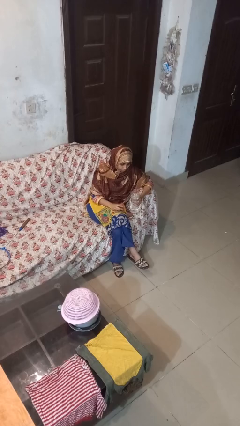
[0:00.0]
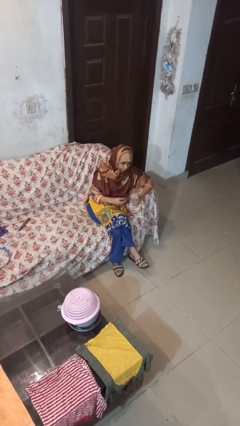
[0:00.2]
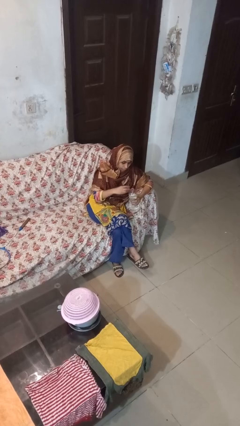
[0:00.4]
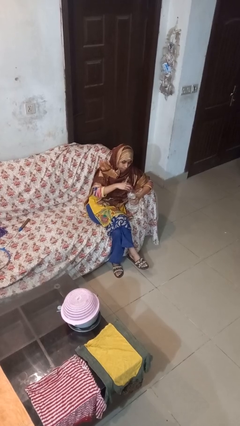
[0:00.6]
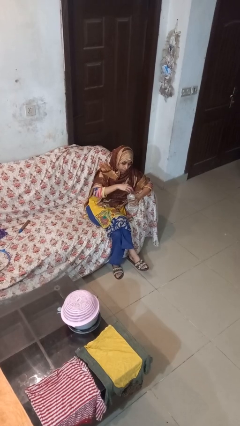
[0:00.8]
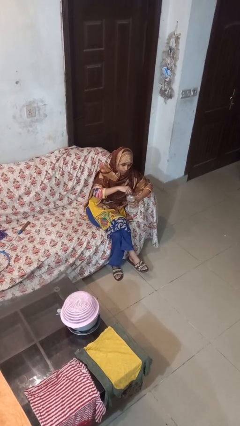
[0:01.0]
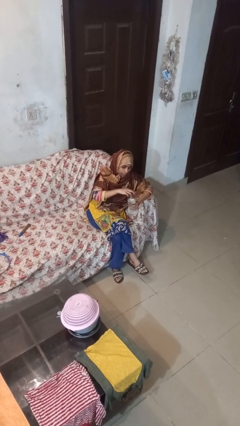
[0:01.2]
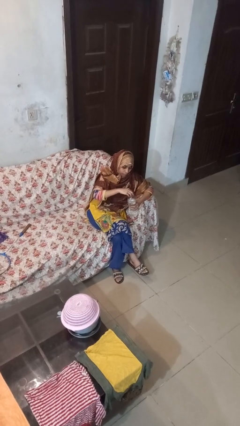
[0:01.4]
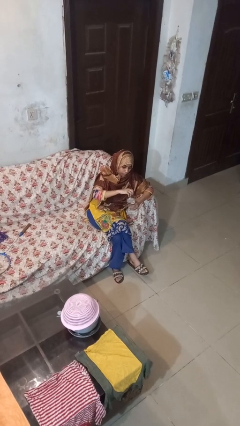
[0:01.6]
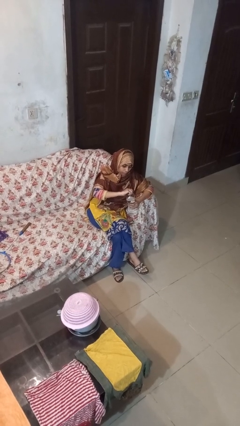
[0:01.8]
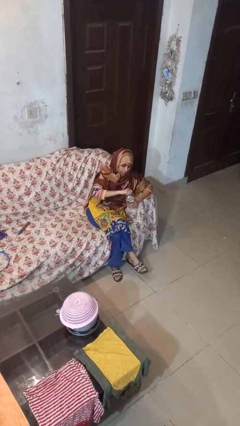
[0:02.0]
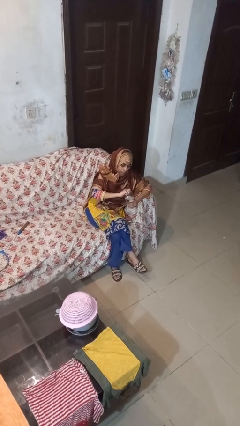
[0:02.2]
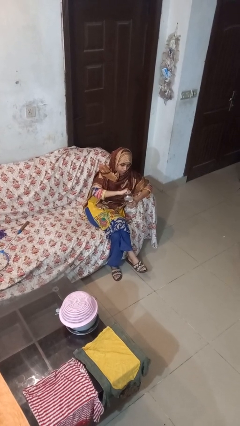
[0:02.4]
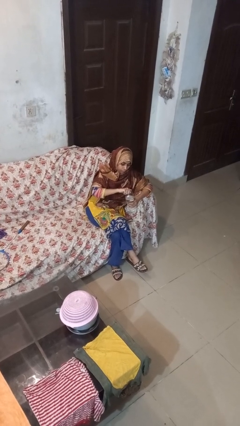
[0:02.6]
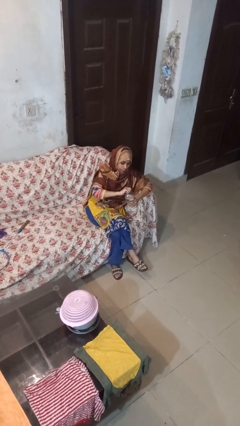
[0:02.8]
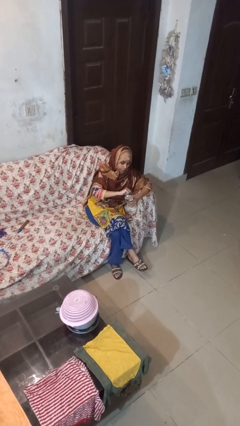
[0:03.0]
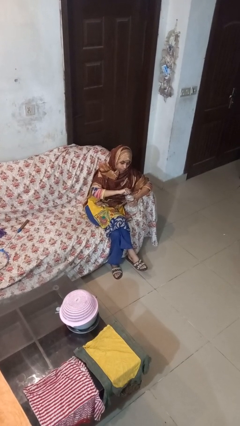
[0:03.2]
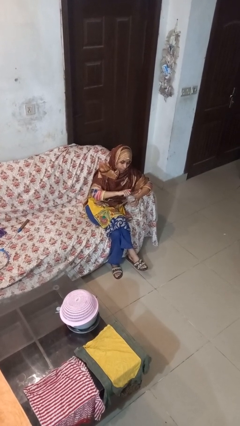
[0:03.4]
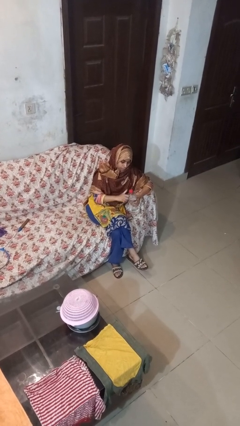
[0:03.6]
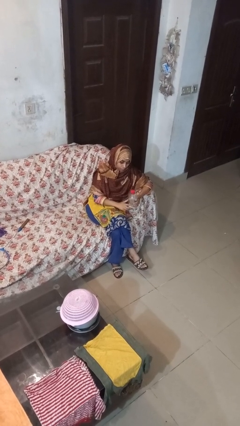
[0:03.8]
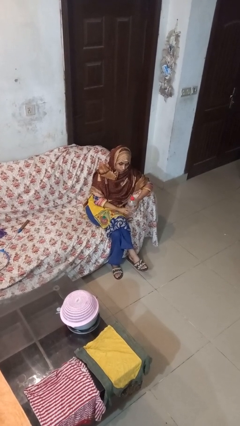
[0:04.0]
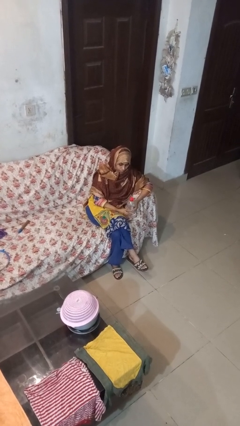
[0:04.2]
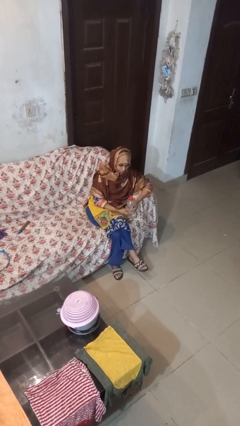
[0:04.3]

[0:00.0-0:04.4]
person screws lid to bottle

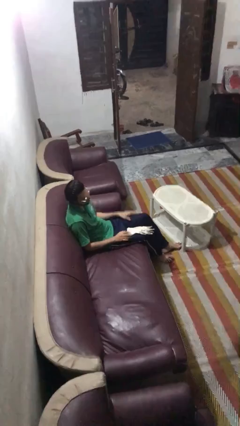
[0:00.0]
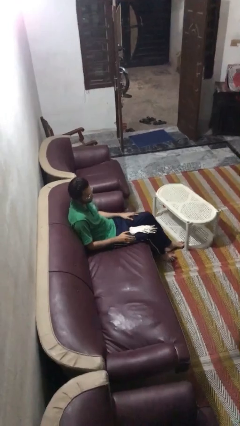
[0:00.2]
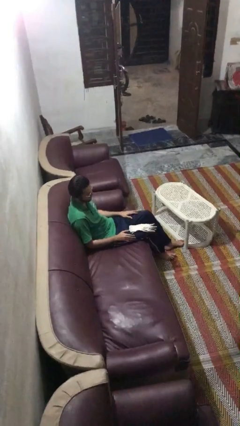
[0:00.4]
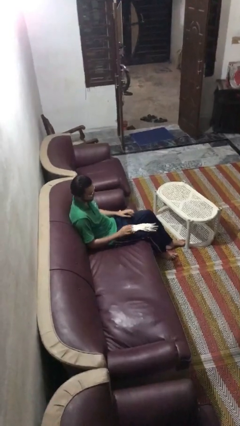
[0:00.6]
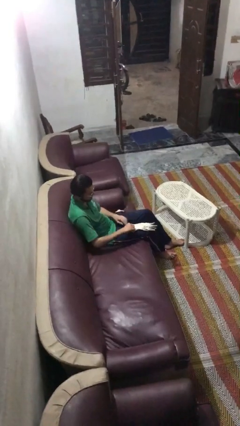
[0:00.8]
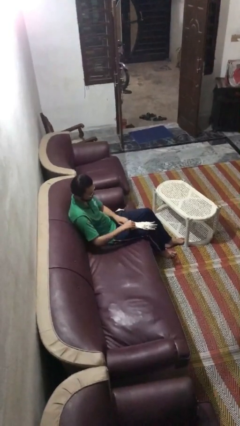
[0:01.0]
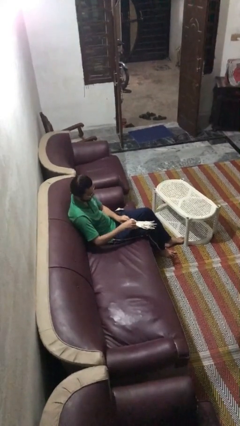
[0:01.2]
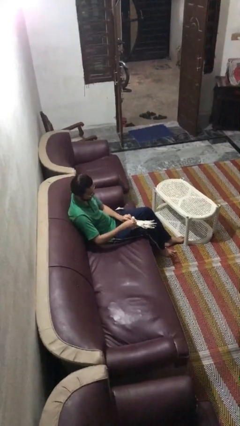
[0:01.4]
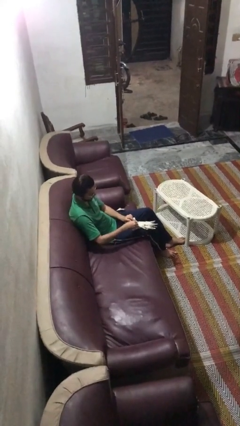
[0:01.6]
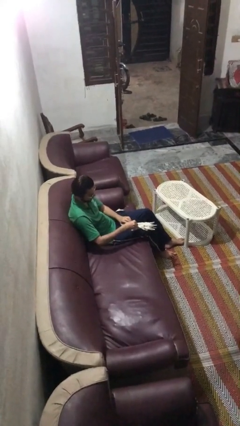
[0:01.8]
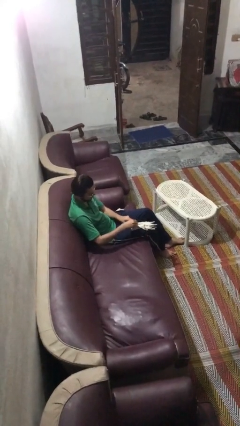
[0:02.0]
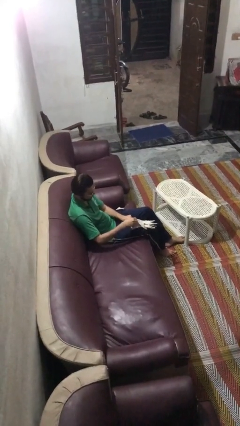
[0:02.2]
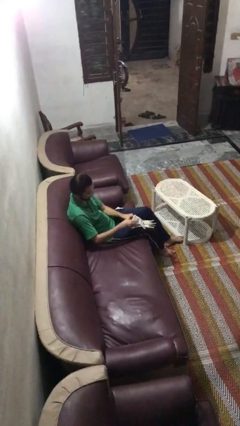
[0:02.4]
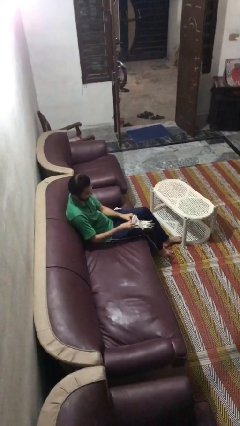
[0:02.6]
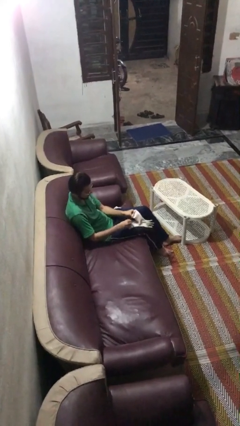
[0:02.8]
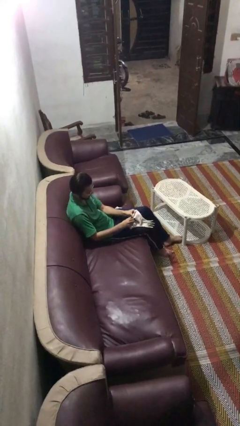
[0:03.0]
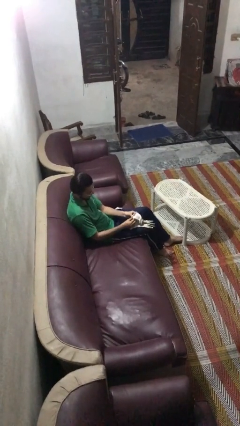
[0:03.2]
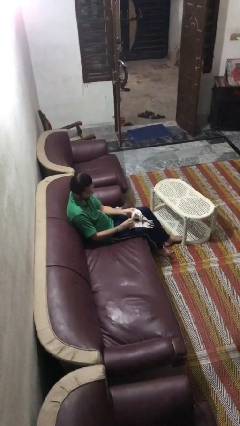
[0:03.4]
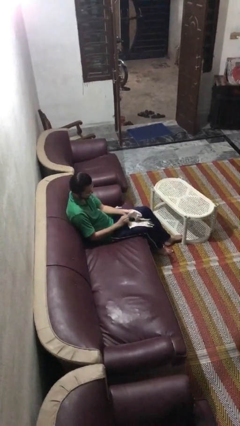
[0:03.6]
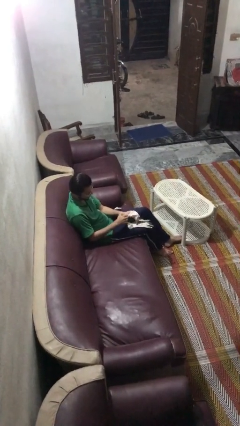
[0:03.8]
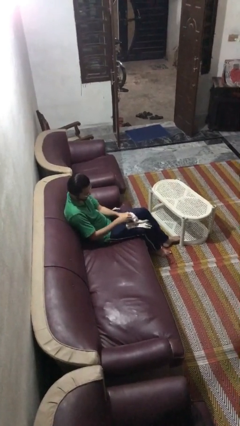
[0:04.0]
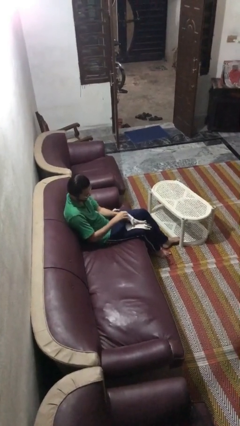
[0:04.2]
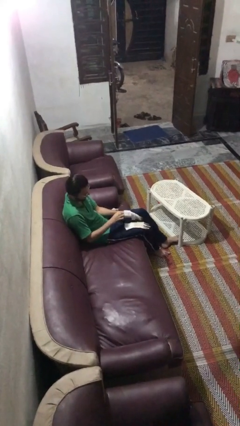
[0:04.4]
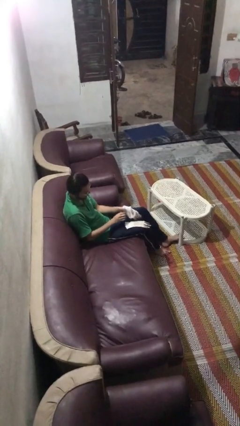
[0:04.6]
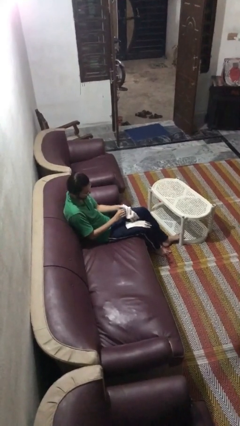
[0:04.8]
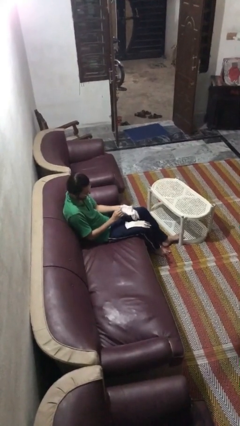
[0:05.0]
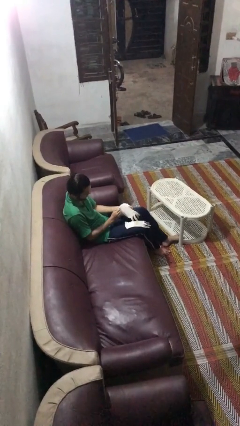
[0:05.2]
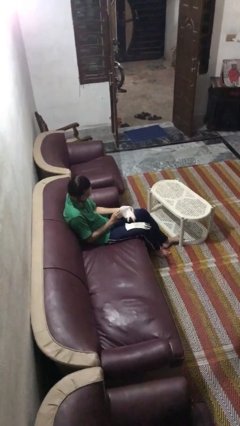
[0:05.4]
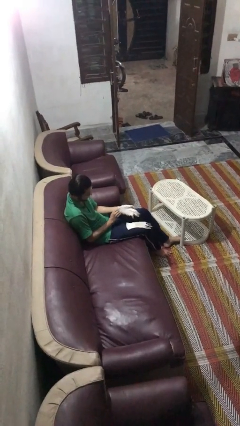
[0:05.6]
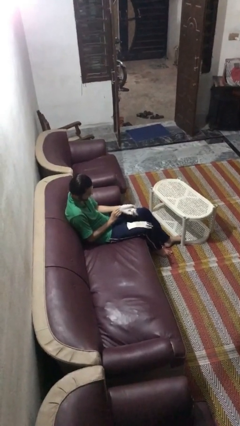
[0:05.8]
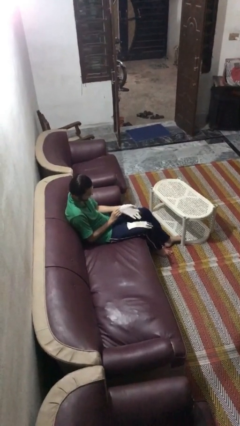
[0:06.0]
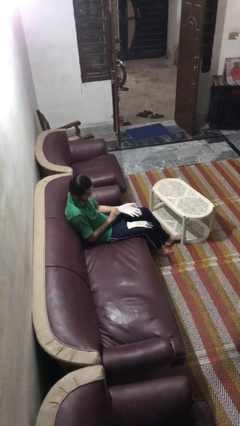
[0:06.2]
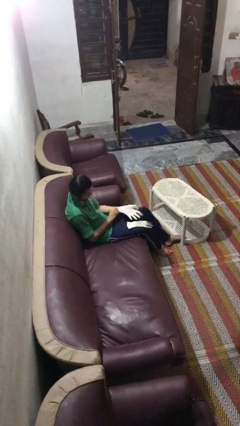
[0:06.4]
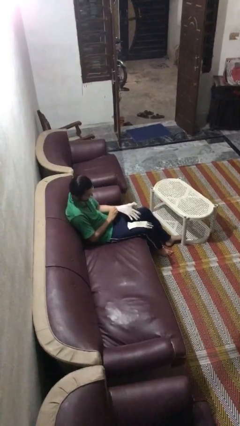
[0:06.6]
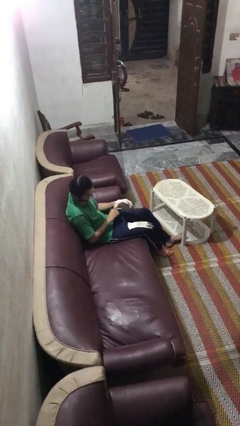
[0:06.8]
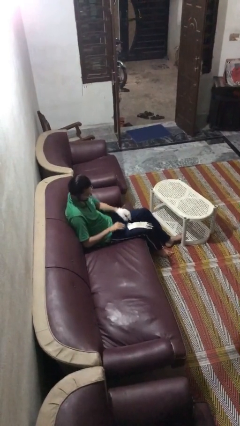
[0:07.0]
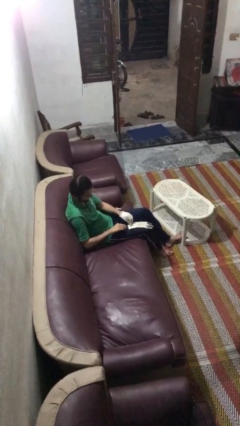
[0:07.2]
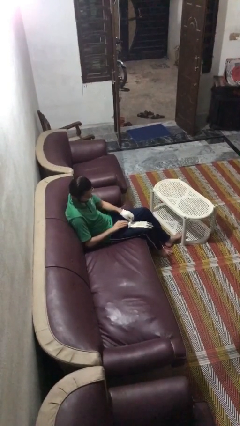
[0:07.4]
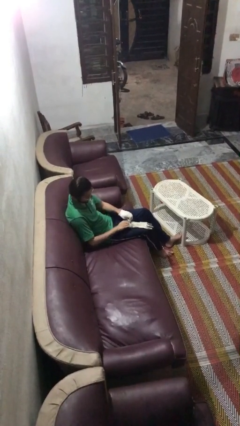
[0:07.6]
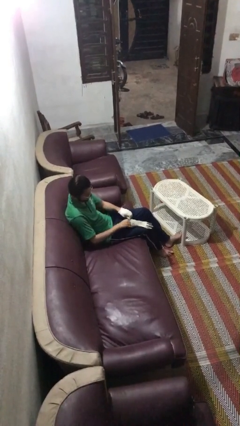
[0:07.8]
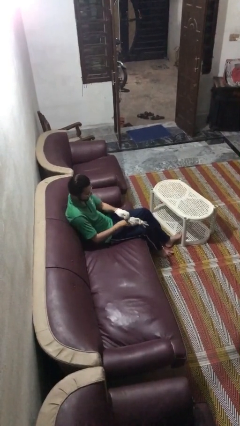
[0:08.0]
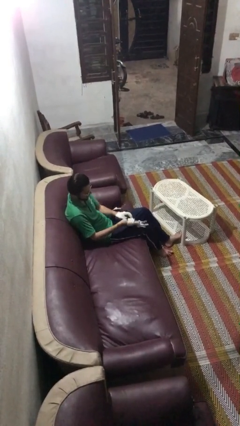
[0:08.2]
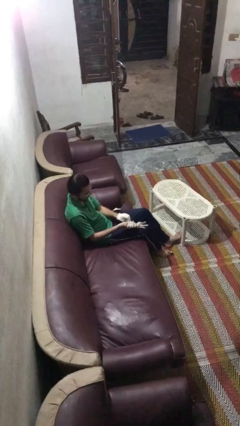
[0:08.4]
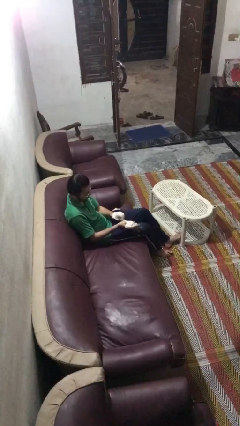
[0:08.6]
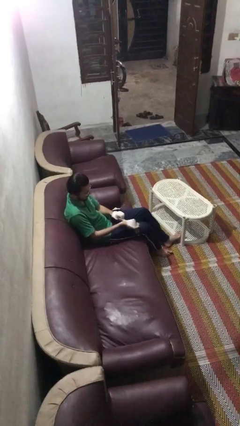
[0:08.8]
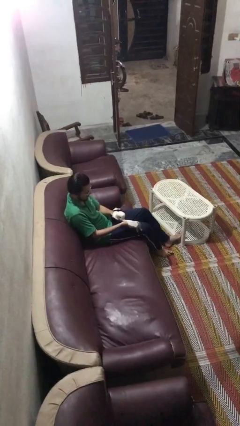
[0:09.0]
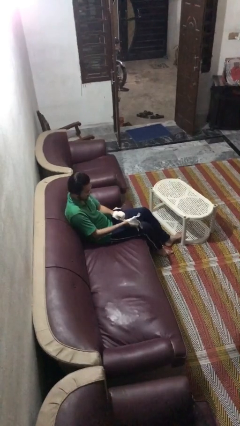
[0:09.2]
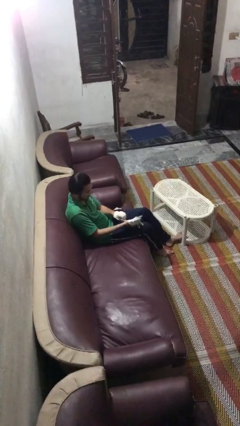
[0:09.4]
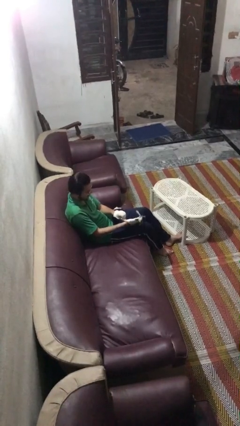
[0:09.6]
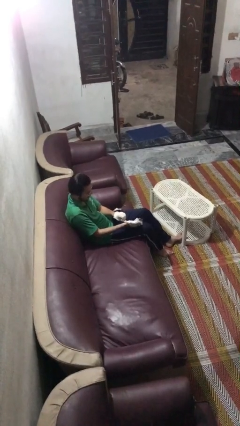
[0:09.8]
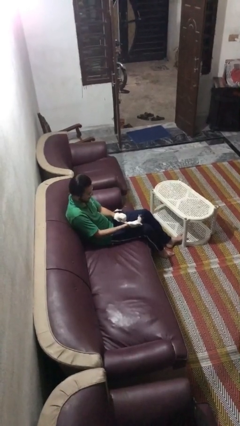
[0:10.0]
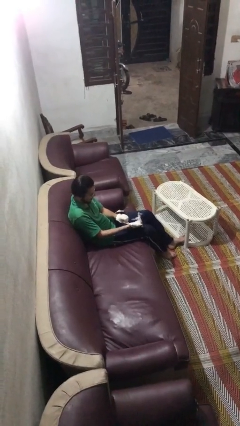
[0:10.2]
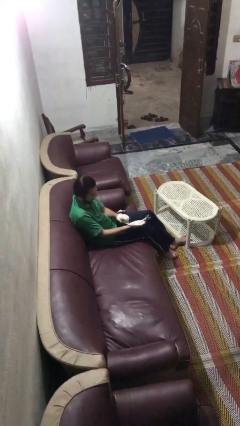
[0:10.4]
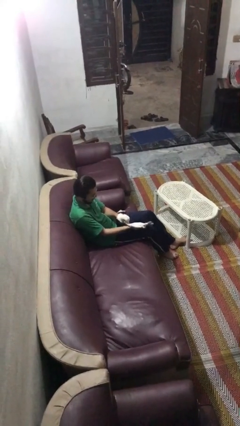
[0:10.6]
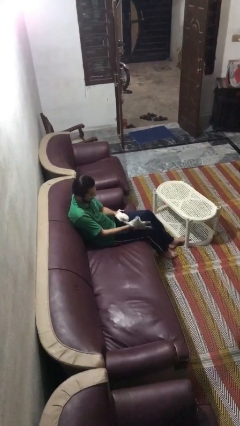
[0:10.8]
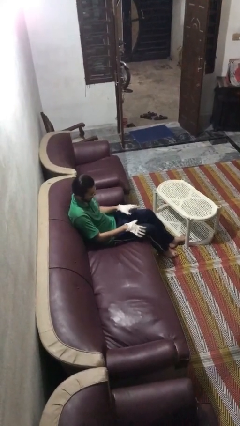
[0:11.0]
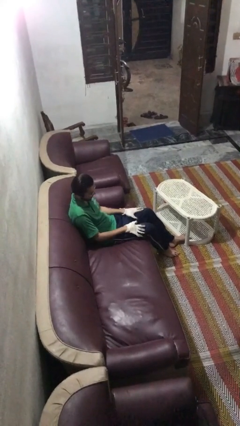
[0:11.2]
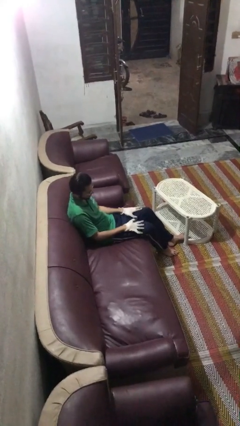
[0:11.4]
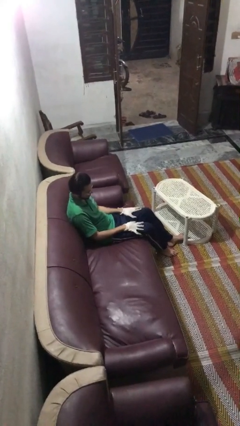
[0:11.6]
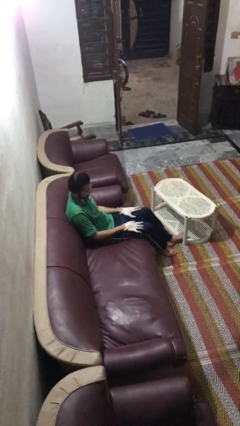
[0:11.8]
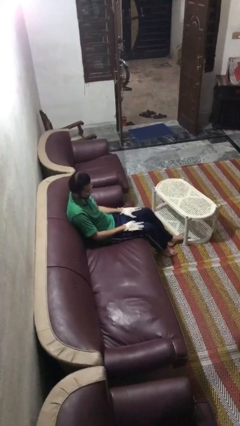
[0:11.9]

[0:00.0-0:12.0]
person puts on gloves

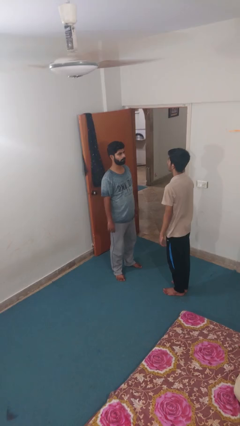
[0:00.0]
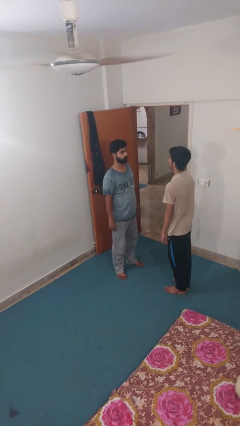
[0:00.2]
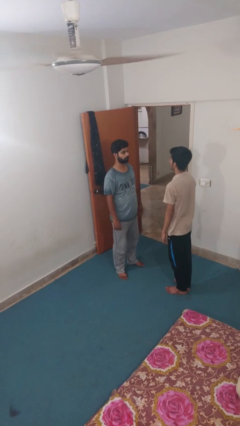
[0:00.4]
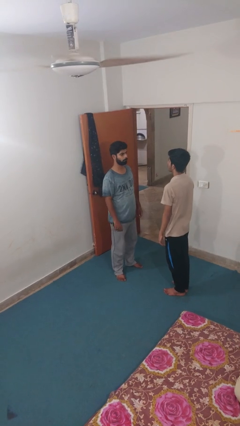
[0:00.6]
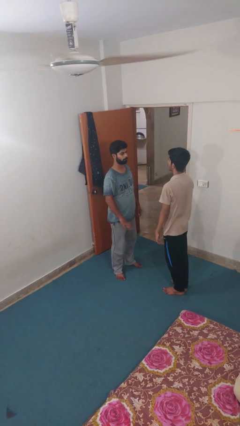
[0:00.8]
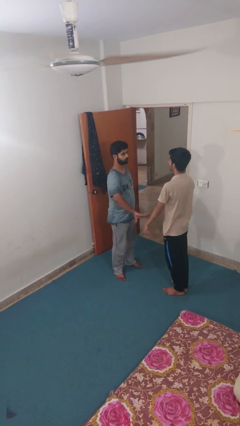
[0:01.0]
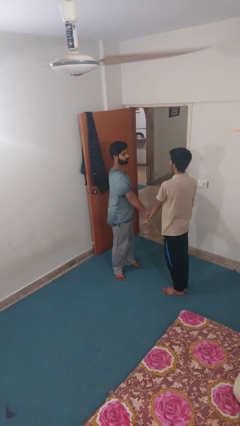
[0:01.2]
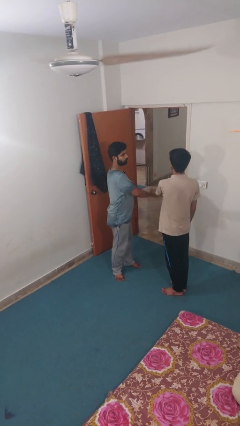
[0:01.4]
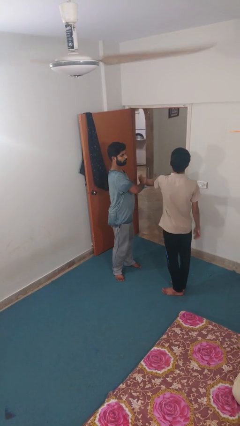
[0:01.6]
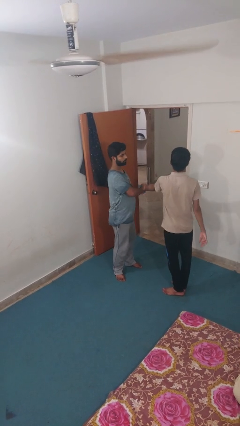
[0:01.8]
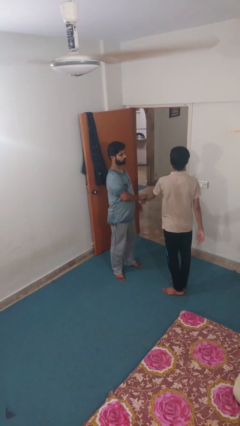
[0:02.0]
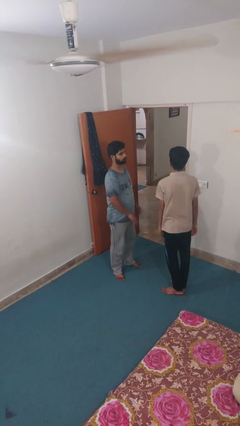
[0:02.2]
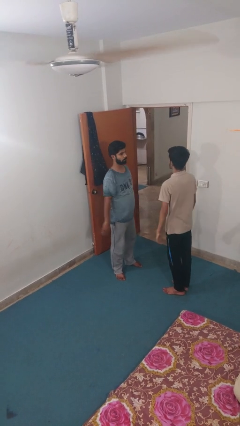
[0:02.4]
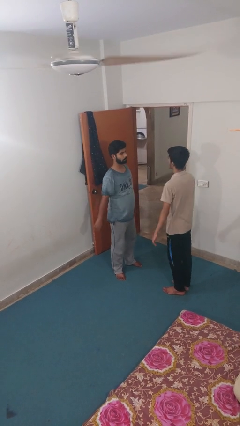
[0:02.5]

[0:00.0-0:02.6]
person grabs person by forearm
